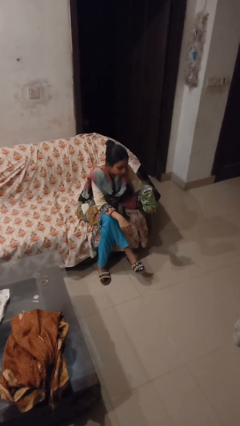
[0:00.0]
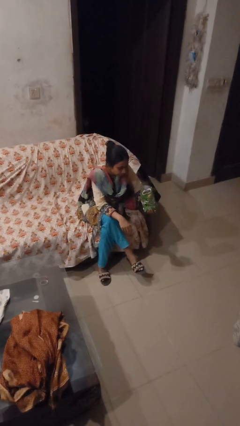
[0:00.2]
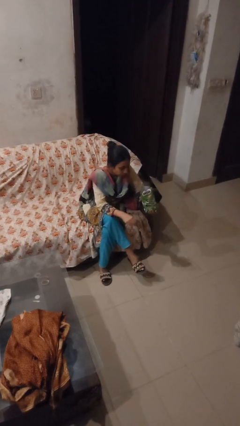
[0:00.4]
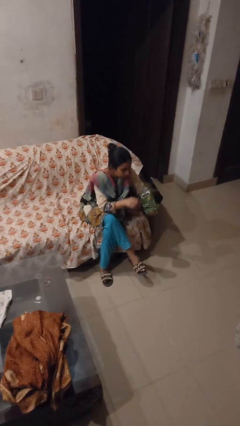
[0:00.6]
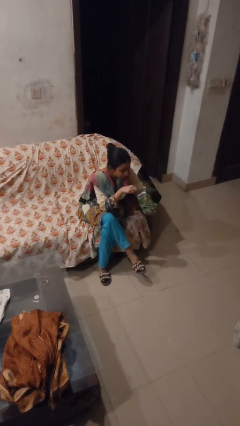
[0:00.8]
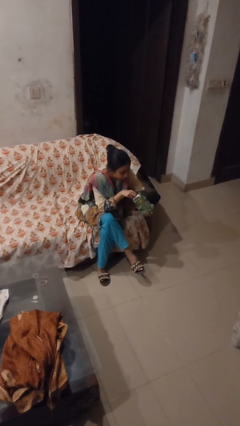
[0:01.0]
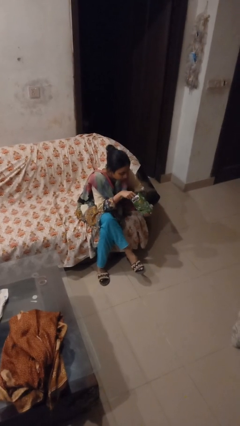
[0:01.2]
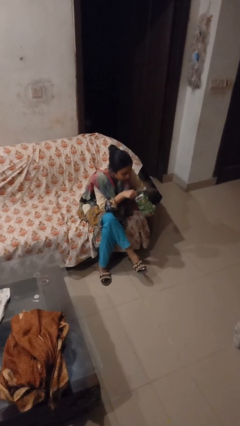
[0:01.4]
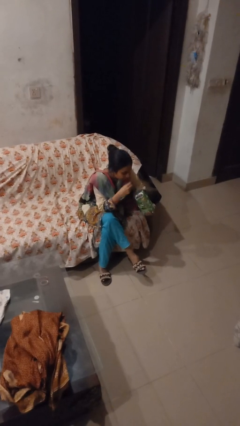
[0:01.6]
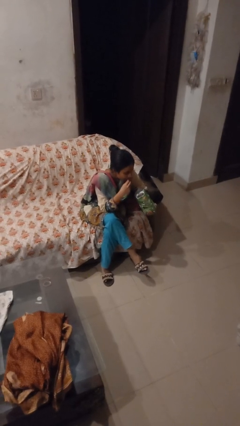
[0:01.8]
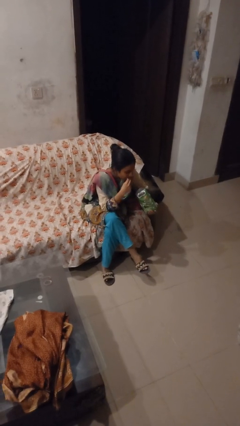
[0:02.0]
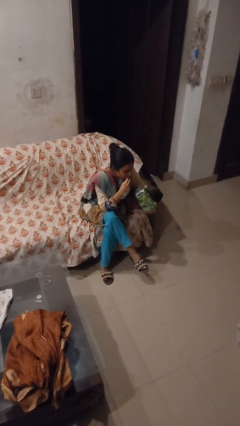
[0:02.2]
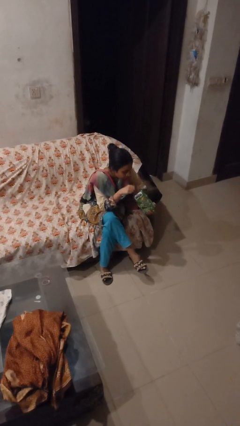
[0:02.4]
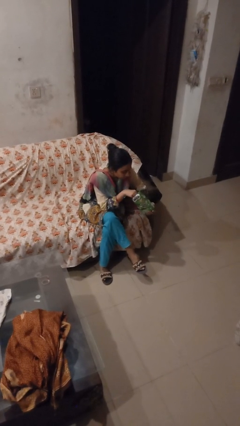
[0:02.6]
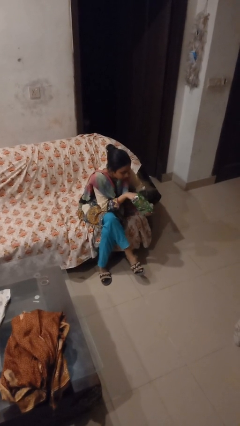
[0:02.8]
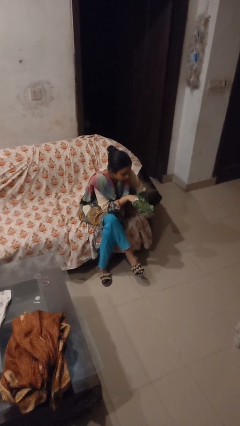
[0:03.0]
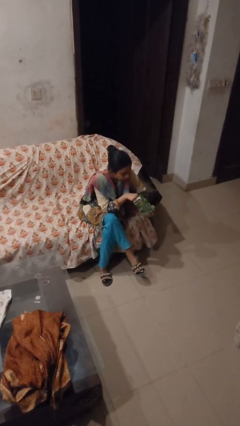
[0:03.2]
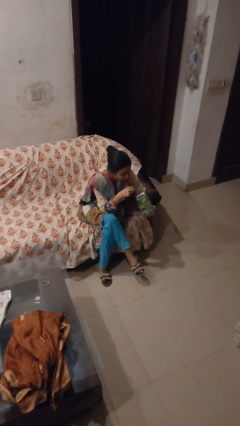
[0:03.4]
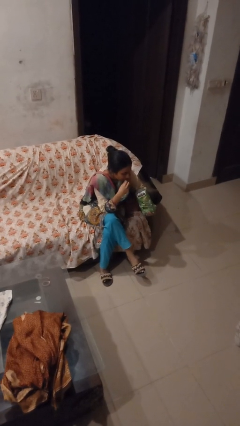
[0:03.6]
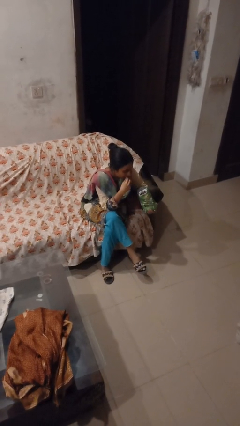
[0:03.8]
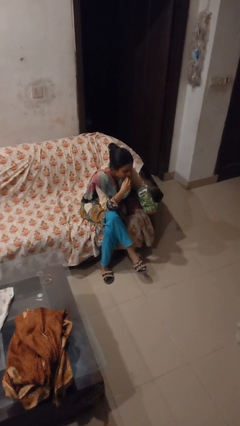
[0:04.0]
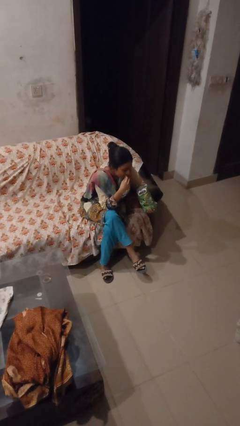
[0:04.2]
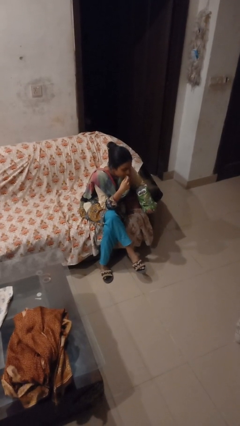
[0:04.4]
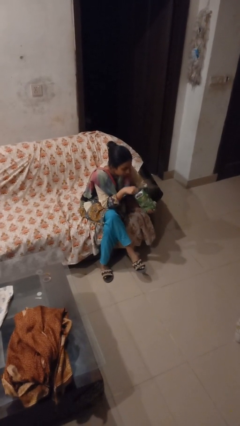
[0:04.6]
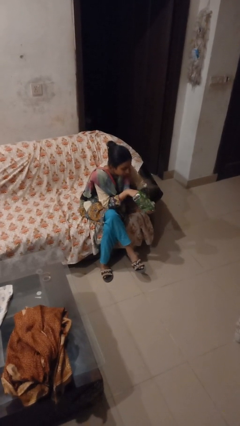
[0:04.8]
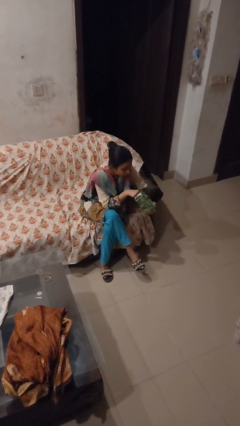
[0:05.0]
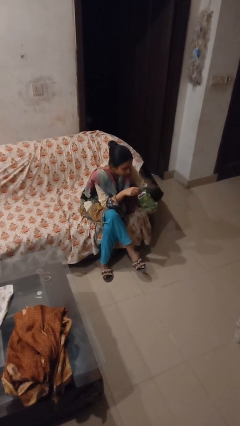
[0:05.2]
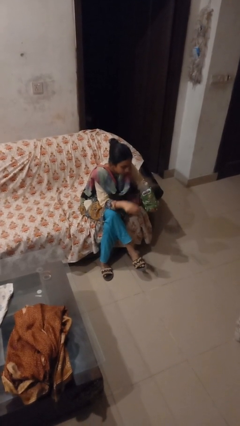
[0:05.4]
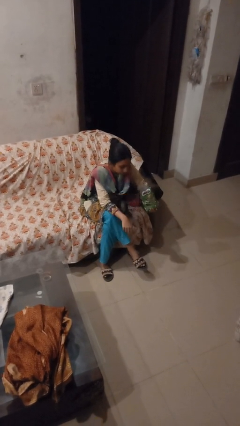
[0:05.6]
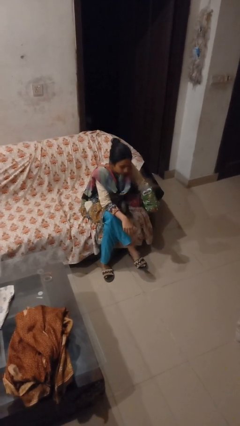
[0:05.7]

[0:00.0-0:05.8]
person eats snack from bag

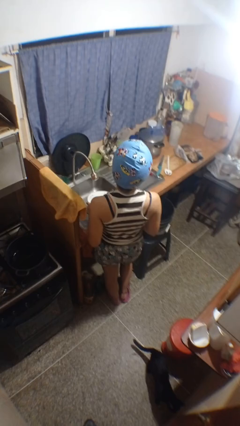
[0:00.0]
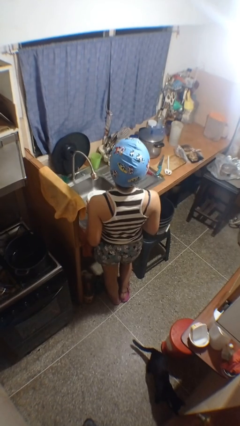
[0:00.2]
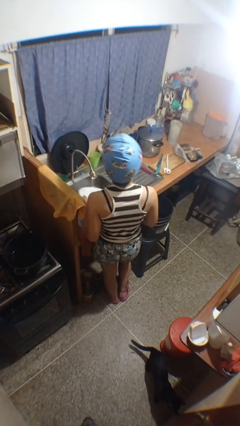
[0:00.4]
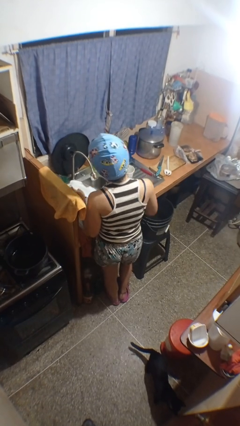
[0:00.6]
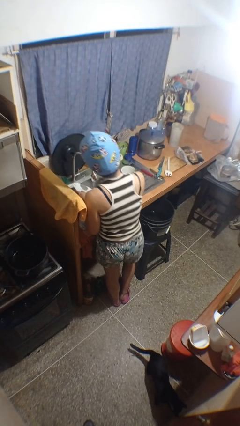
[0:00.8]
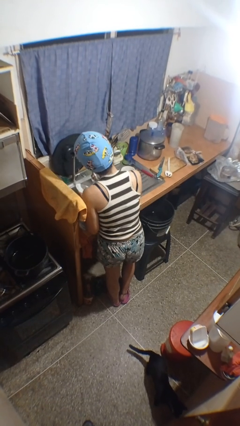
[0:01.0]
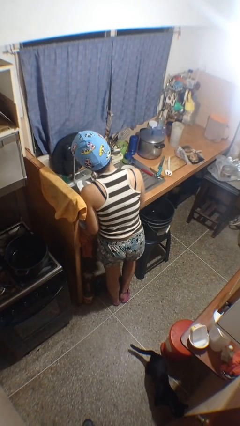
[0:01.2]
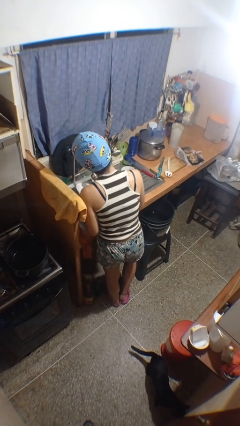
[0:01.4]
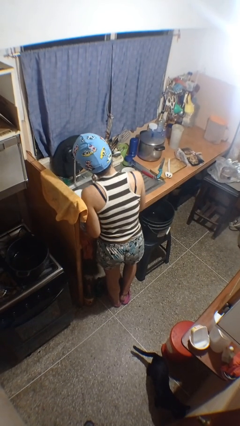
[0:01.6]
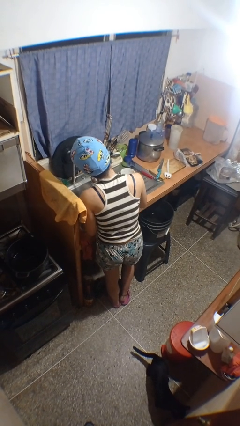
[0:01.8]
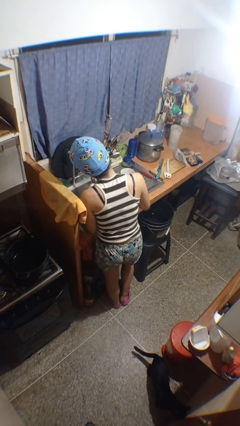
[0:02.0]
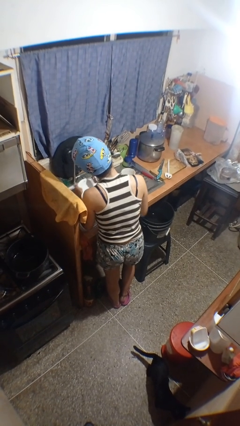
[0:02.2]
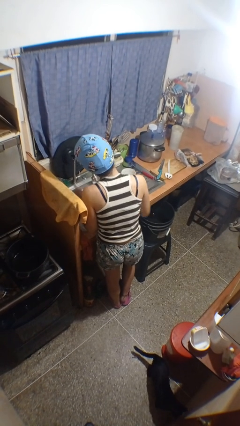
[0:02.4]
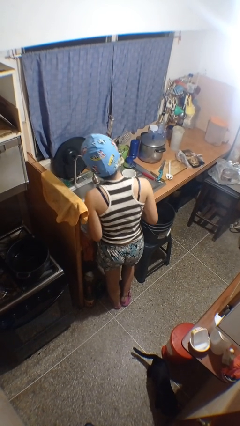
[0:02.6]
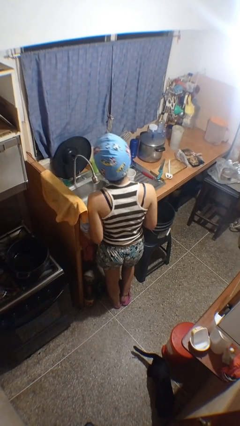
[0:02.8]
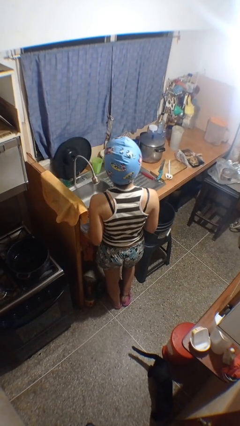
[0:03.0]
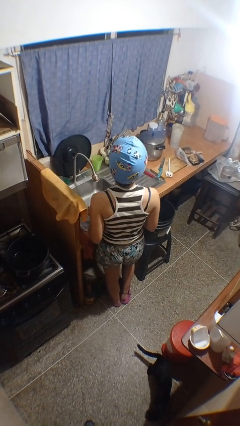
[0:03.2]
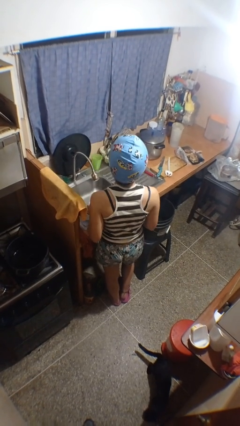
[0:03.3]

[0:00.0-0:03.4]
person washes dish

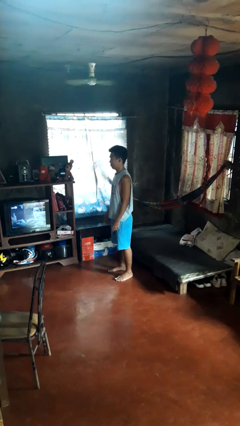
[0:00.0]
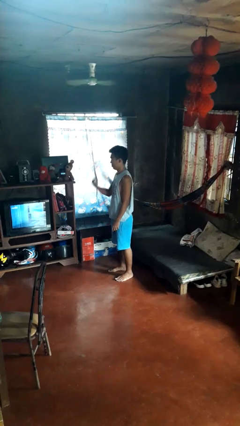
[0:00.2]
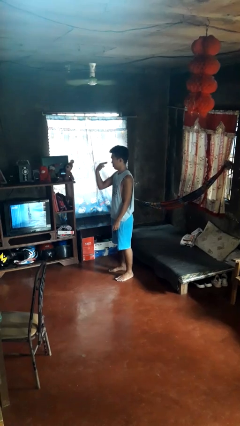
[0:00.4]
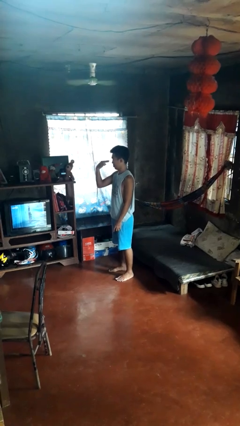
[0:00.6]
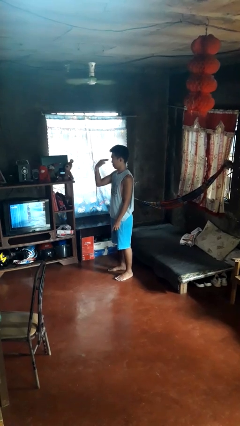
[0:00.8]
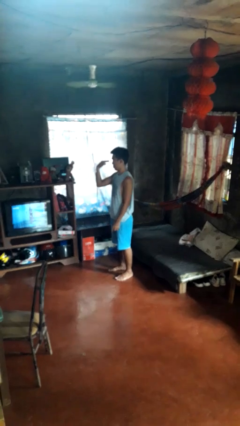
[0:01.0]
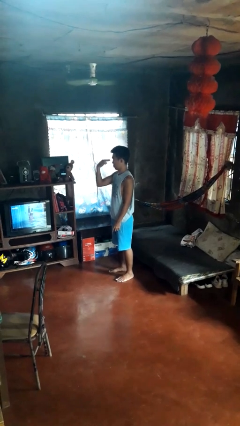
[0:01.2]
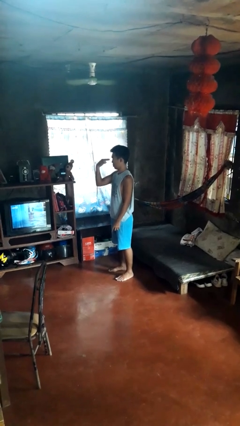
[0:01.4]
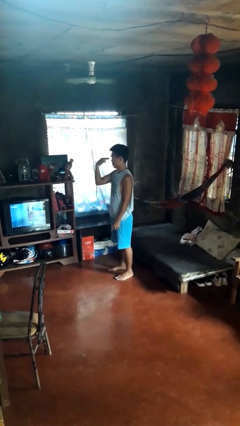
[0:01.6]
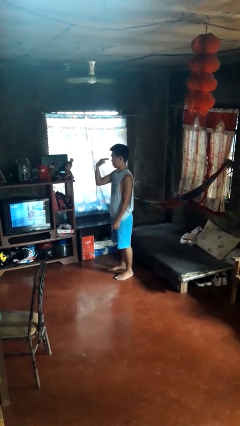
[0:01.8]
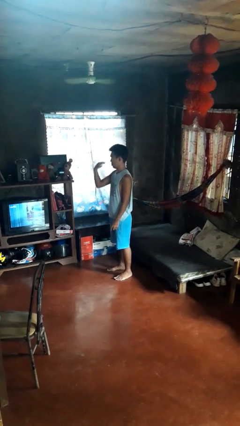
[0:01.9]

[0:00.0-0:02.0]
person gestures watch closely

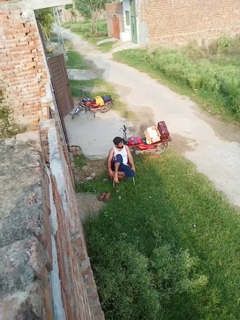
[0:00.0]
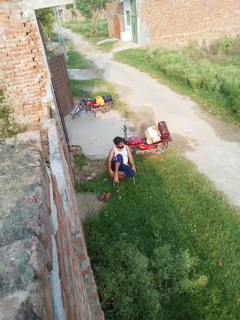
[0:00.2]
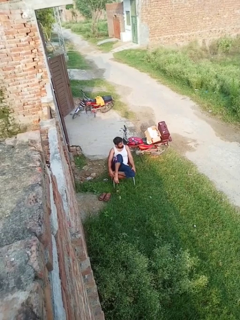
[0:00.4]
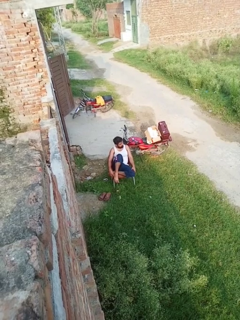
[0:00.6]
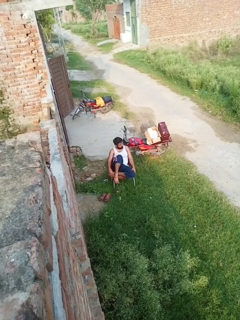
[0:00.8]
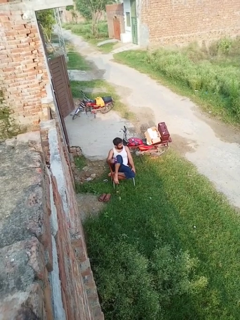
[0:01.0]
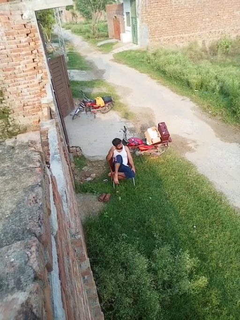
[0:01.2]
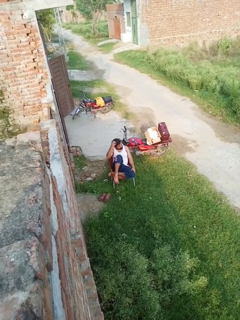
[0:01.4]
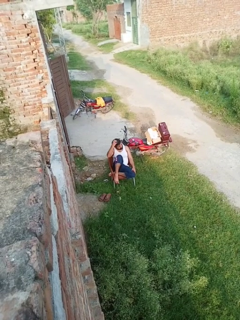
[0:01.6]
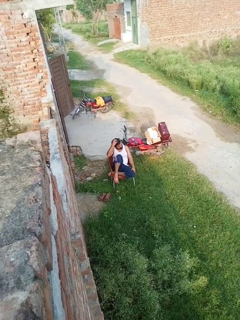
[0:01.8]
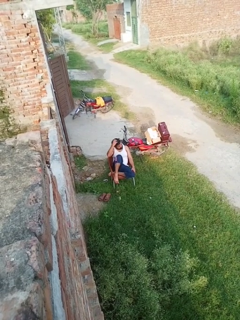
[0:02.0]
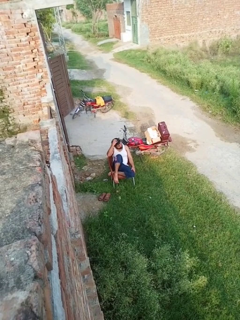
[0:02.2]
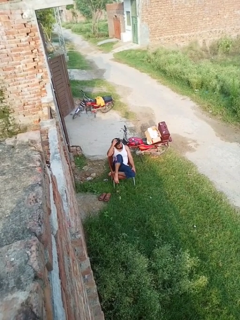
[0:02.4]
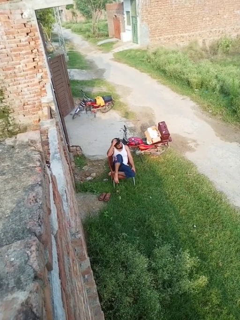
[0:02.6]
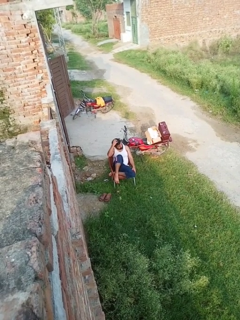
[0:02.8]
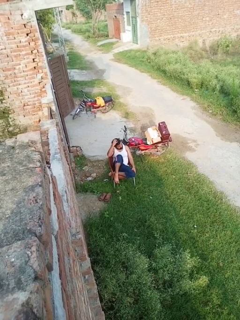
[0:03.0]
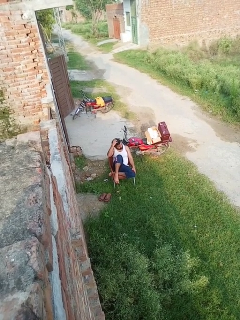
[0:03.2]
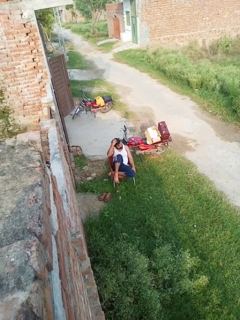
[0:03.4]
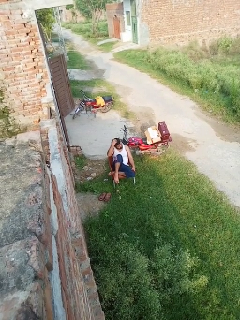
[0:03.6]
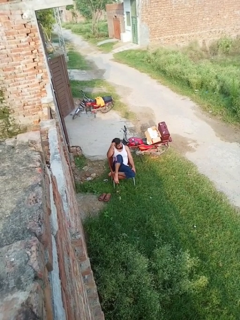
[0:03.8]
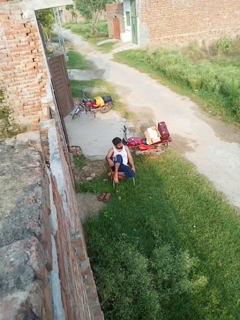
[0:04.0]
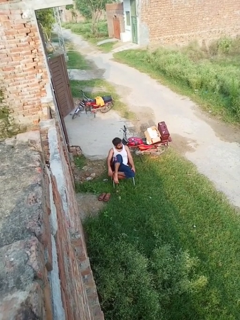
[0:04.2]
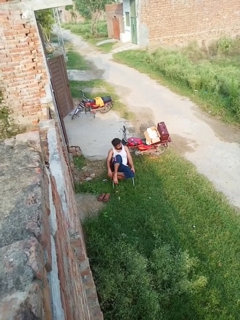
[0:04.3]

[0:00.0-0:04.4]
person scratches face

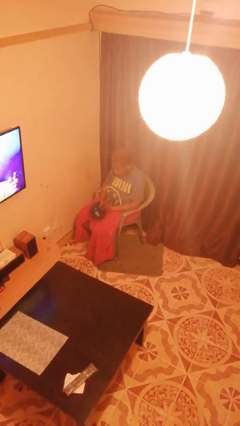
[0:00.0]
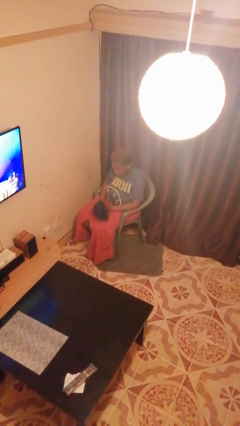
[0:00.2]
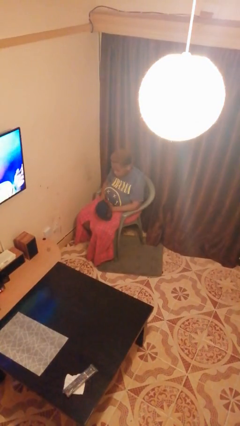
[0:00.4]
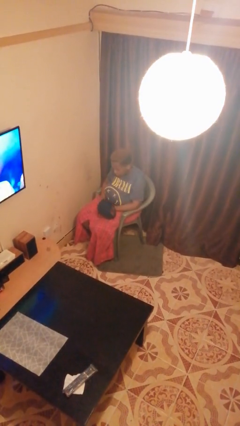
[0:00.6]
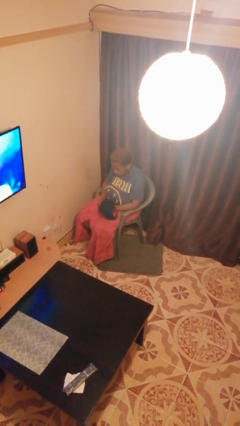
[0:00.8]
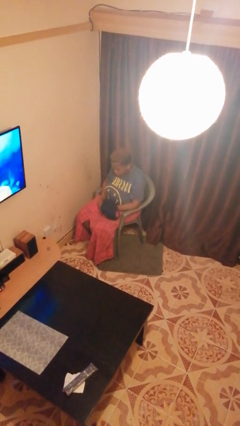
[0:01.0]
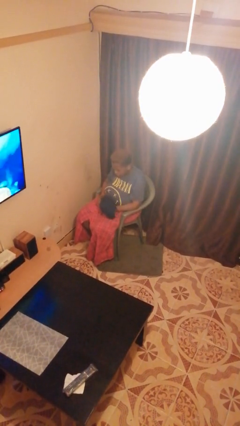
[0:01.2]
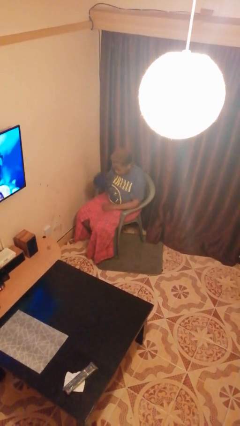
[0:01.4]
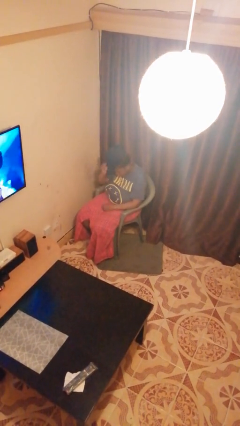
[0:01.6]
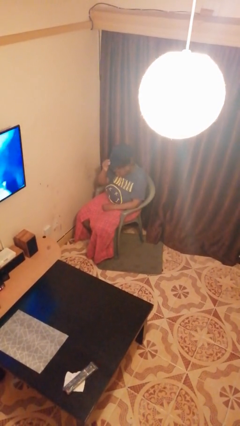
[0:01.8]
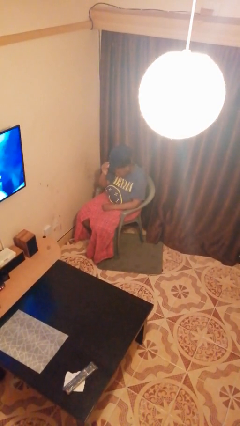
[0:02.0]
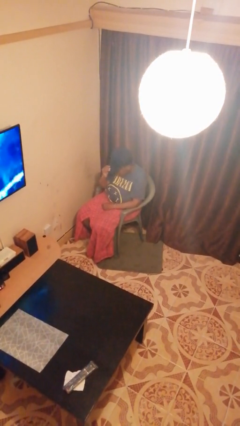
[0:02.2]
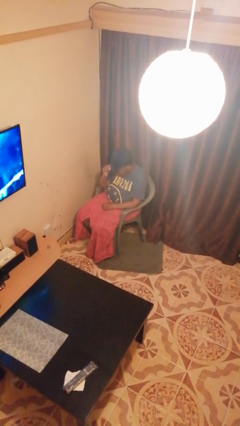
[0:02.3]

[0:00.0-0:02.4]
person puts on hat
